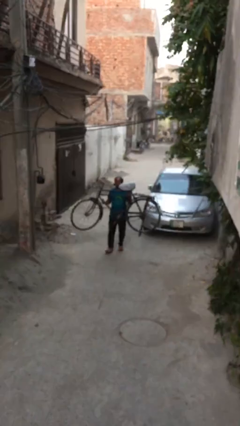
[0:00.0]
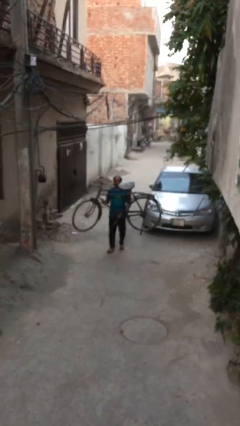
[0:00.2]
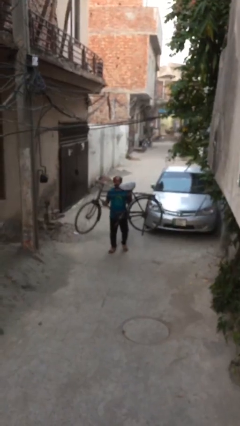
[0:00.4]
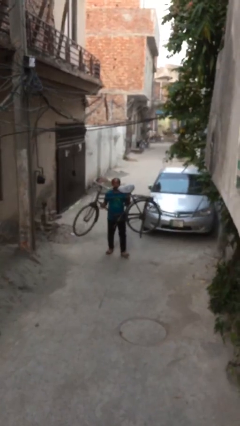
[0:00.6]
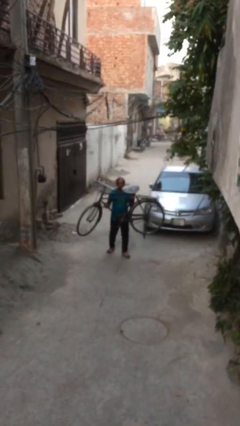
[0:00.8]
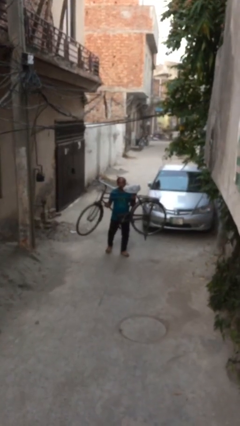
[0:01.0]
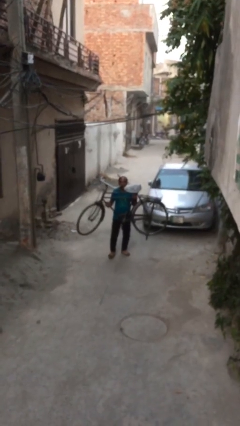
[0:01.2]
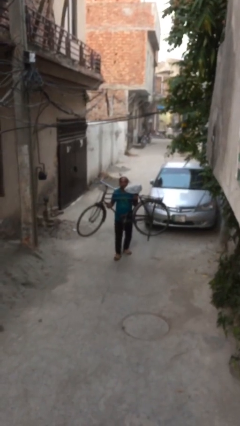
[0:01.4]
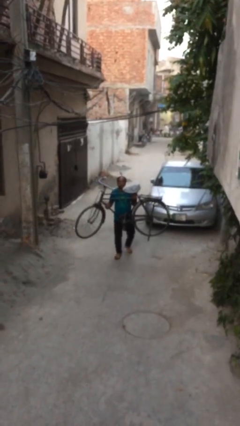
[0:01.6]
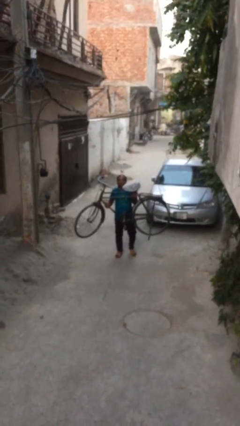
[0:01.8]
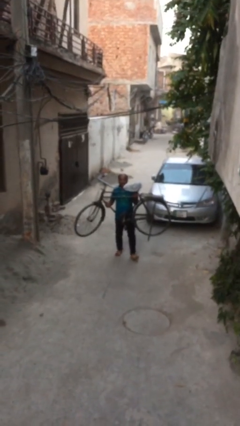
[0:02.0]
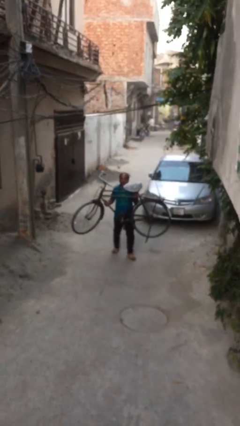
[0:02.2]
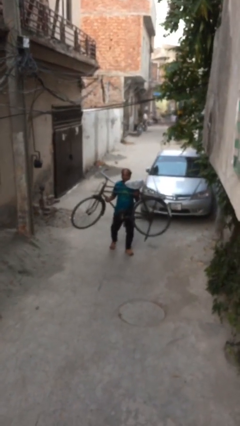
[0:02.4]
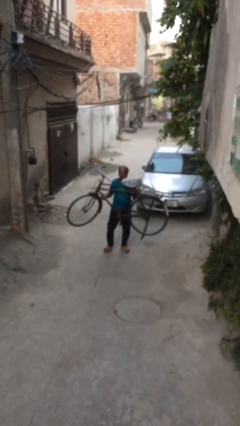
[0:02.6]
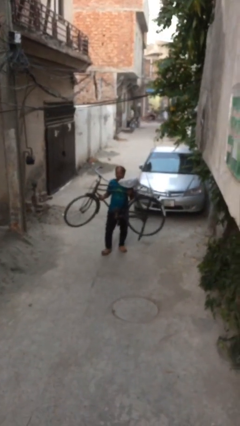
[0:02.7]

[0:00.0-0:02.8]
person carries heavy object

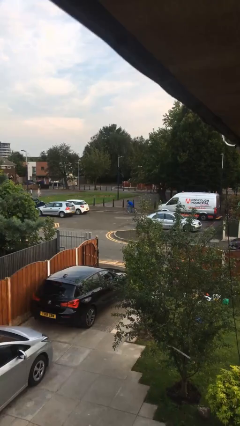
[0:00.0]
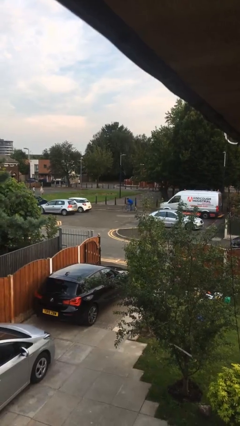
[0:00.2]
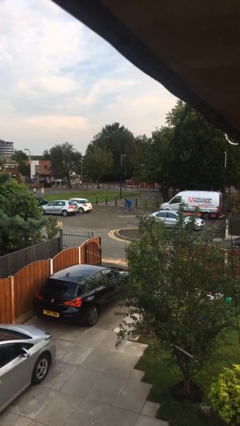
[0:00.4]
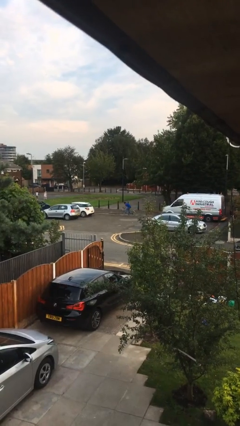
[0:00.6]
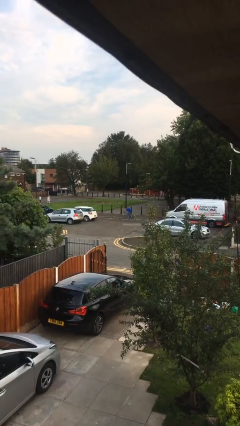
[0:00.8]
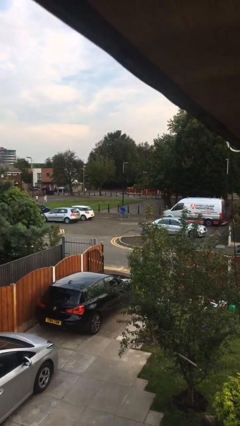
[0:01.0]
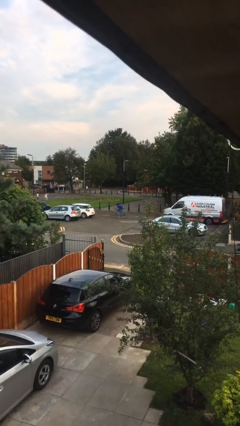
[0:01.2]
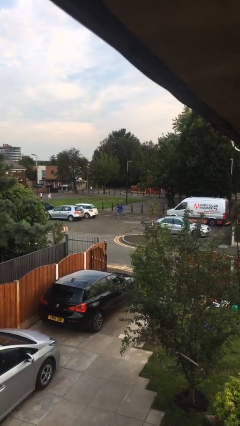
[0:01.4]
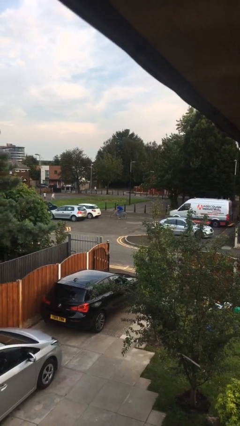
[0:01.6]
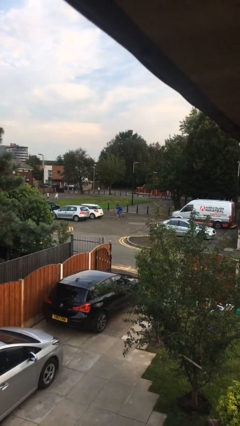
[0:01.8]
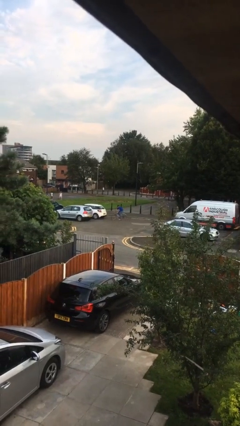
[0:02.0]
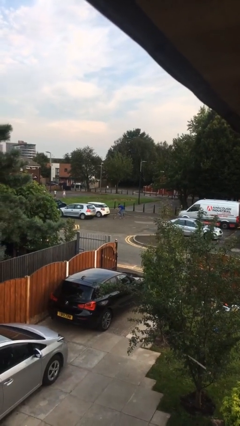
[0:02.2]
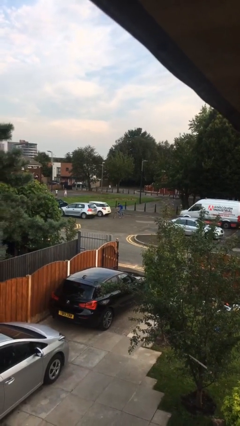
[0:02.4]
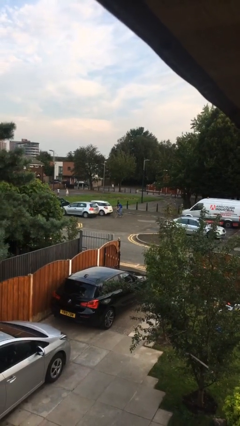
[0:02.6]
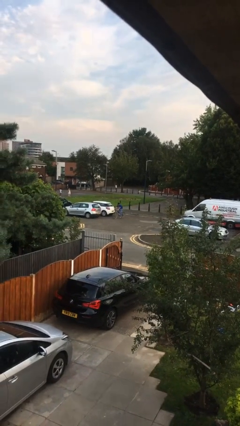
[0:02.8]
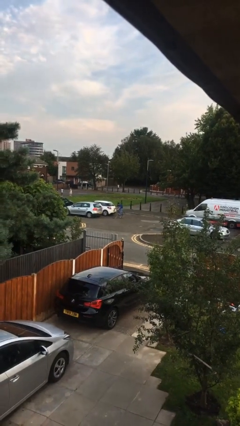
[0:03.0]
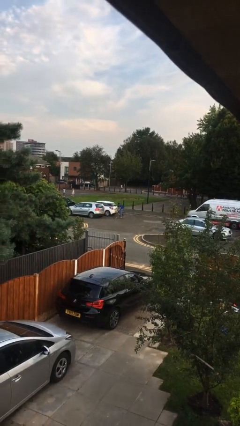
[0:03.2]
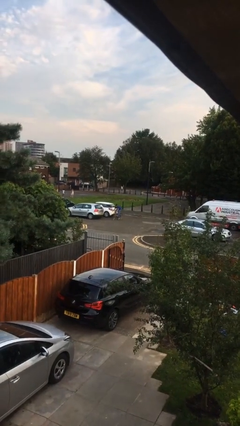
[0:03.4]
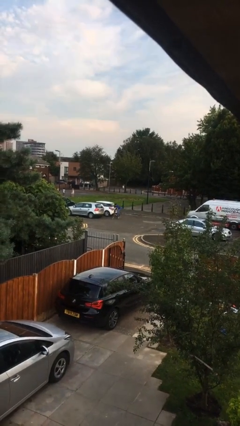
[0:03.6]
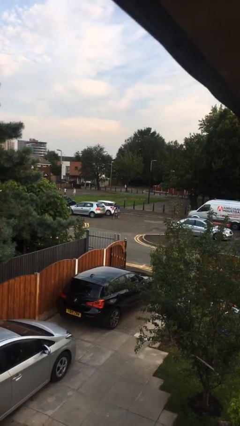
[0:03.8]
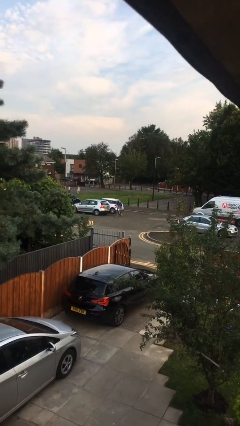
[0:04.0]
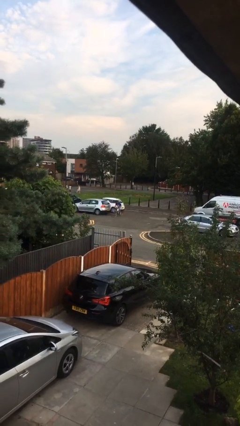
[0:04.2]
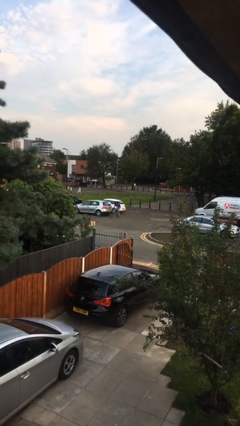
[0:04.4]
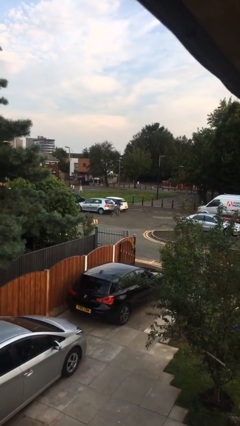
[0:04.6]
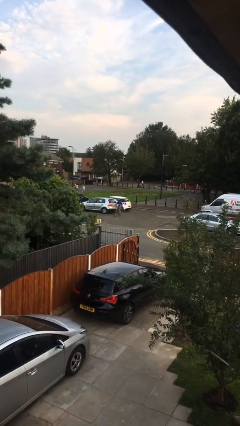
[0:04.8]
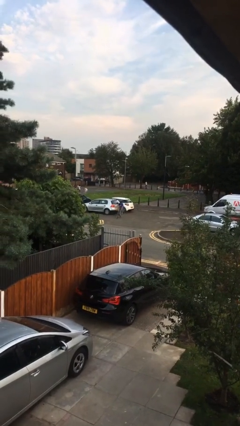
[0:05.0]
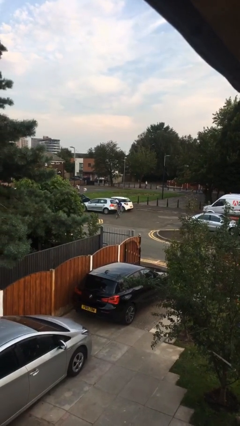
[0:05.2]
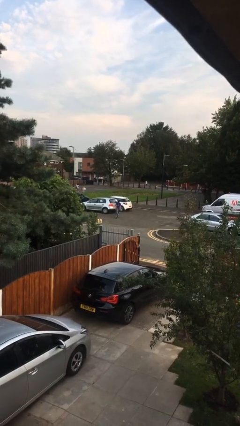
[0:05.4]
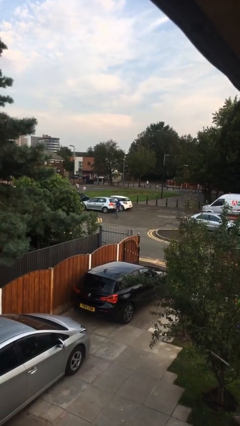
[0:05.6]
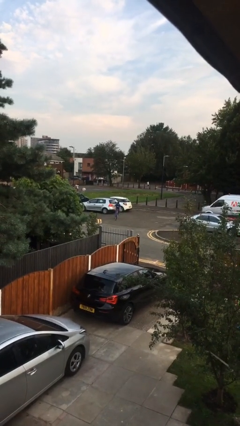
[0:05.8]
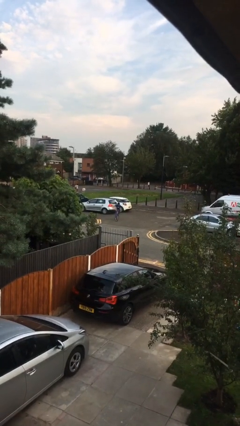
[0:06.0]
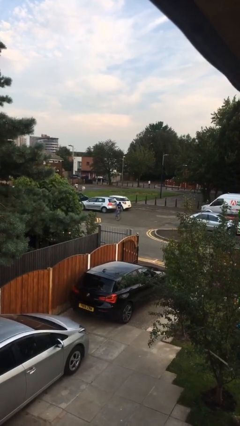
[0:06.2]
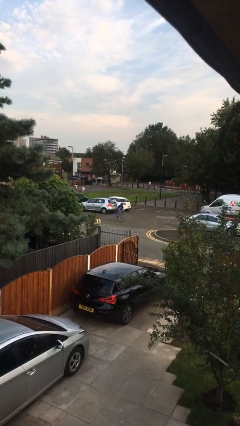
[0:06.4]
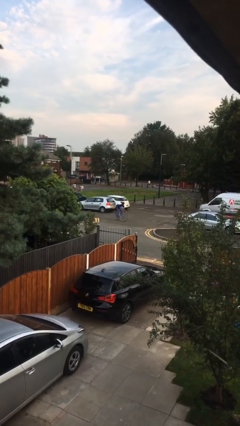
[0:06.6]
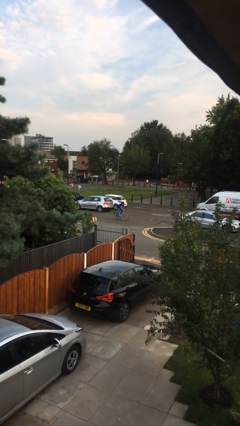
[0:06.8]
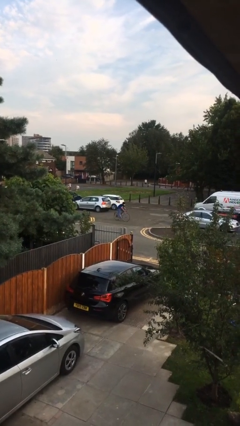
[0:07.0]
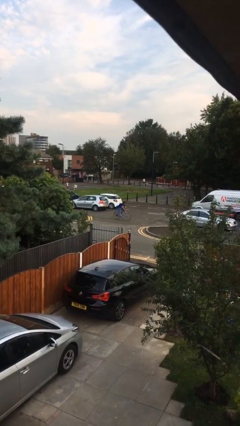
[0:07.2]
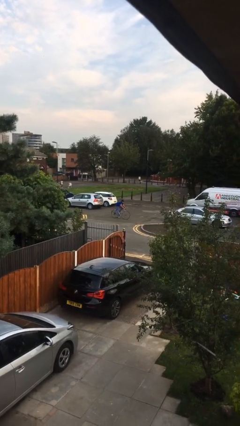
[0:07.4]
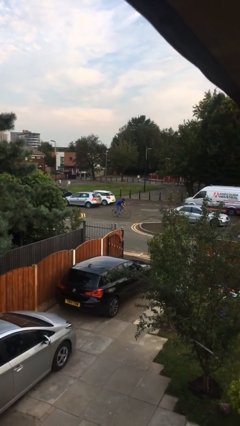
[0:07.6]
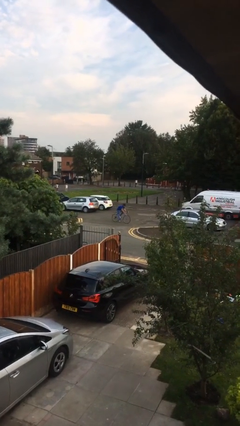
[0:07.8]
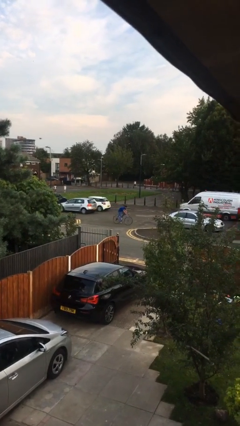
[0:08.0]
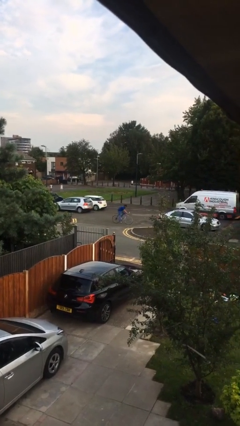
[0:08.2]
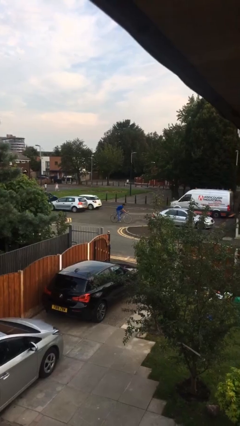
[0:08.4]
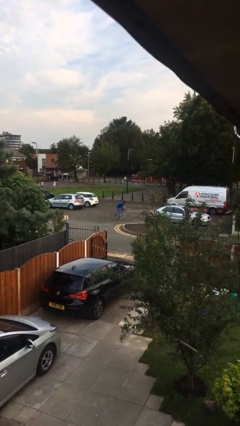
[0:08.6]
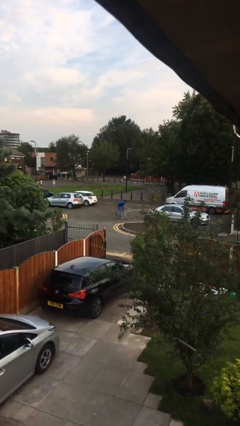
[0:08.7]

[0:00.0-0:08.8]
person rides bicycle

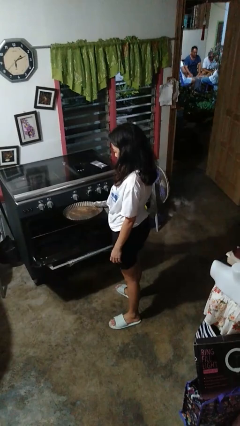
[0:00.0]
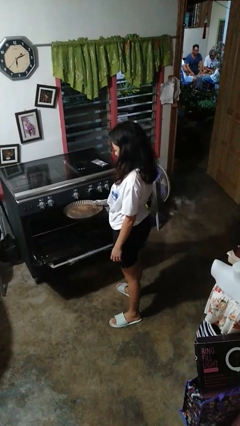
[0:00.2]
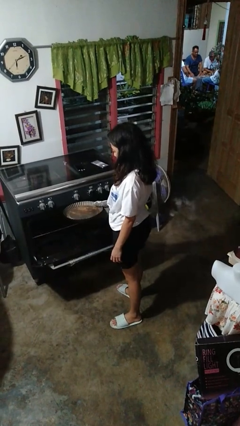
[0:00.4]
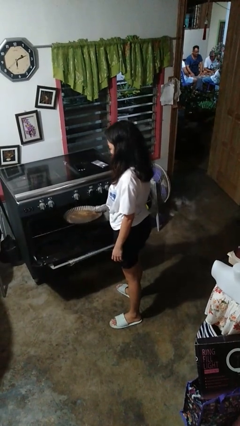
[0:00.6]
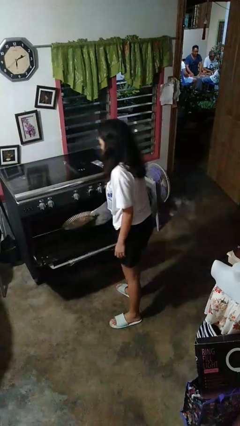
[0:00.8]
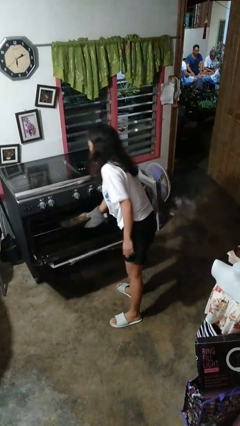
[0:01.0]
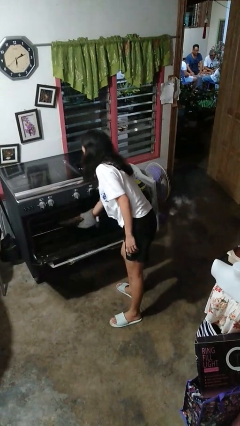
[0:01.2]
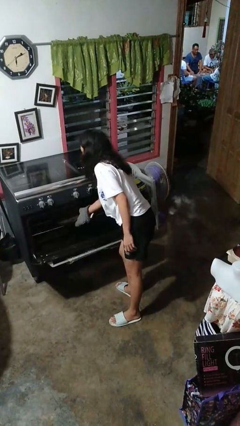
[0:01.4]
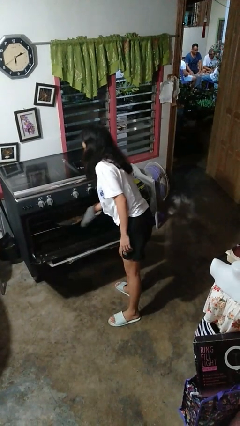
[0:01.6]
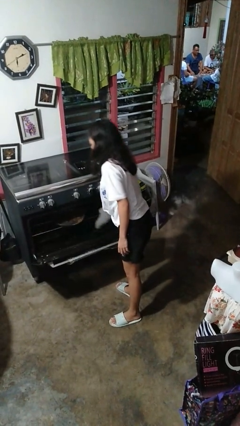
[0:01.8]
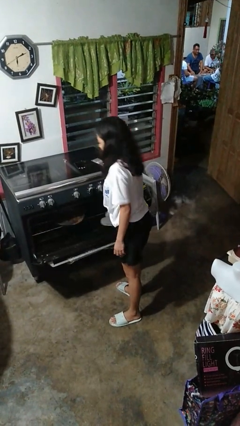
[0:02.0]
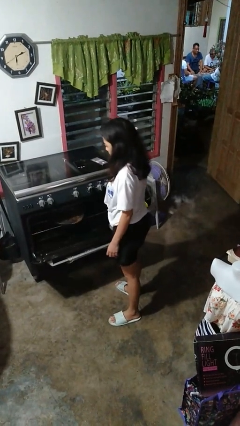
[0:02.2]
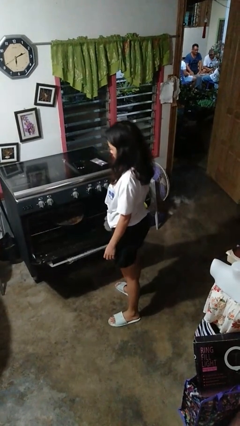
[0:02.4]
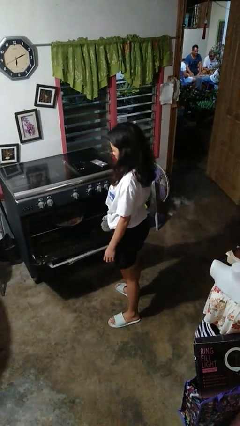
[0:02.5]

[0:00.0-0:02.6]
person puts object into oven

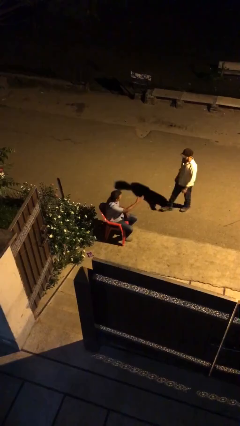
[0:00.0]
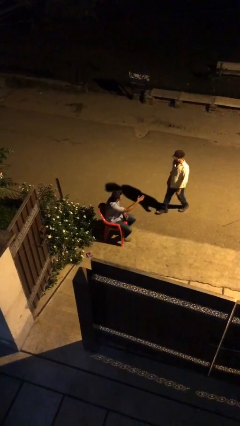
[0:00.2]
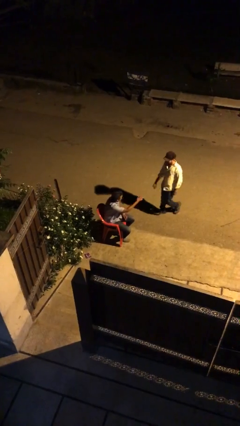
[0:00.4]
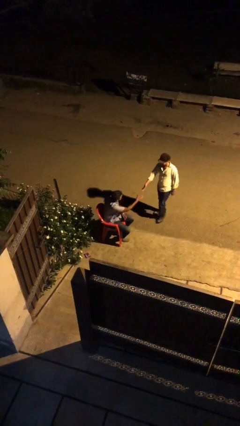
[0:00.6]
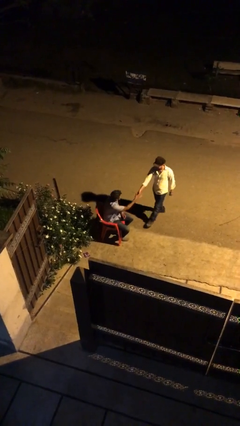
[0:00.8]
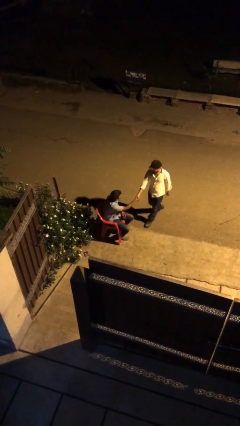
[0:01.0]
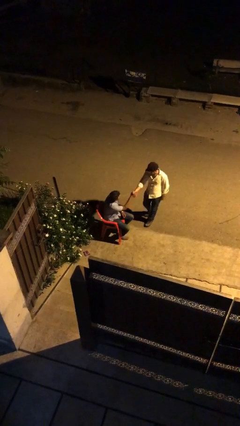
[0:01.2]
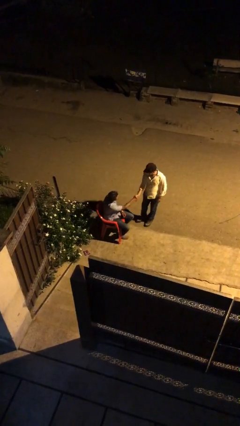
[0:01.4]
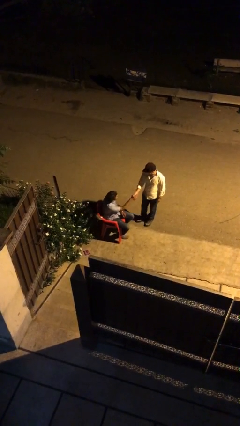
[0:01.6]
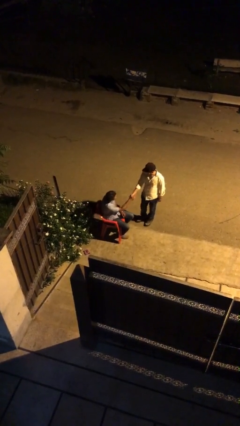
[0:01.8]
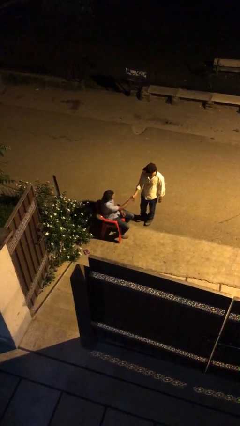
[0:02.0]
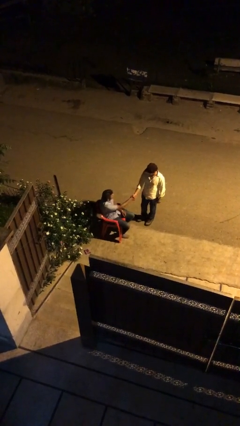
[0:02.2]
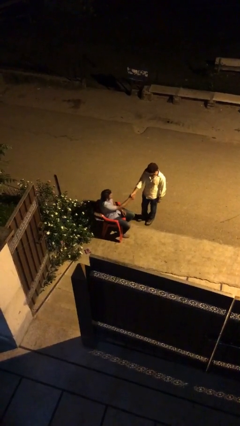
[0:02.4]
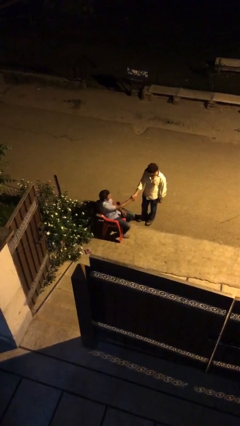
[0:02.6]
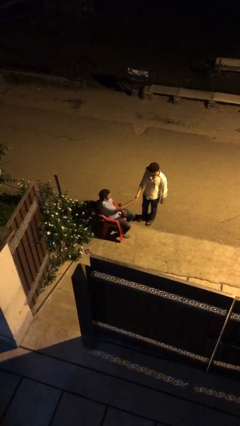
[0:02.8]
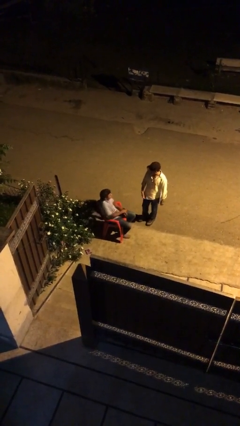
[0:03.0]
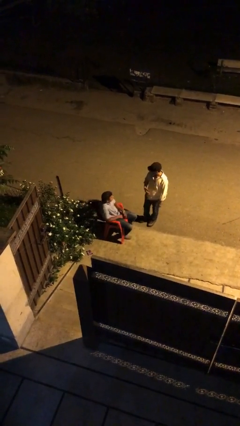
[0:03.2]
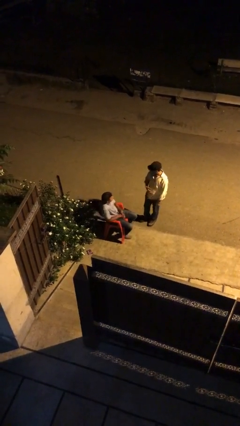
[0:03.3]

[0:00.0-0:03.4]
person shakes hand

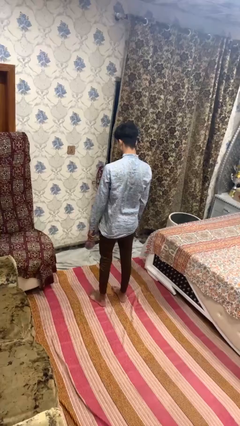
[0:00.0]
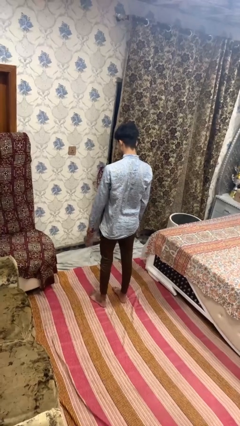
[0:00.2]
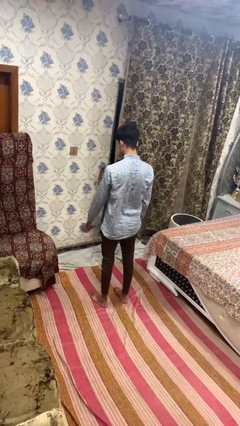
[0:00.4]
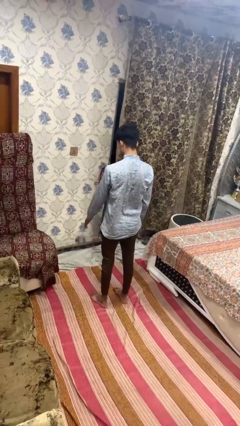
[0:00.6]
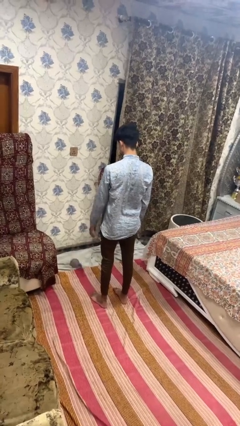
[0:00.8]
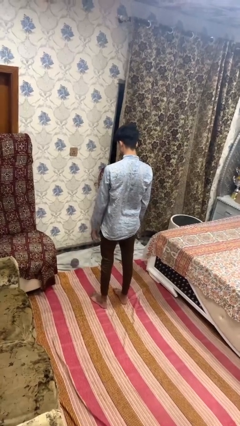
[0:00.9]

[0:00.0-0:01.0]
person throws object to ground
